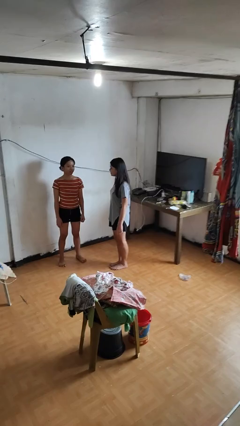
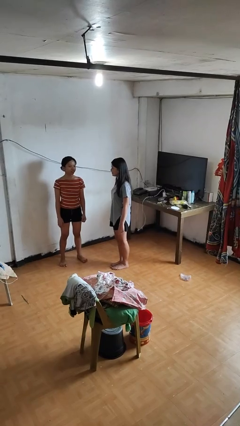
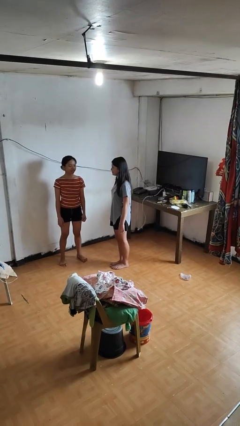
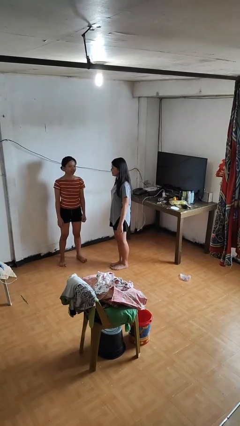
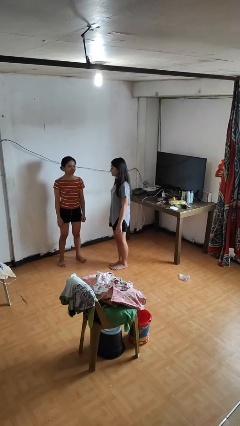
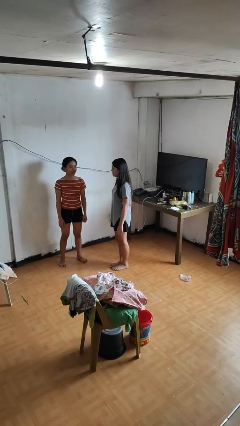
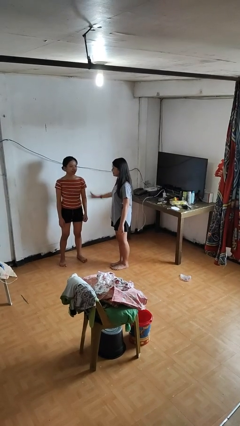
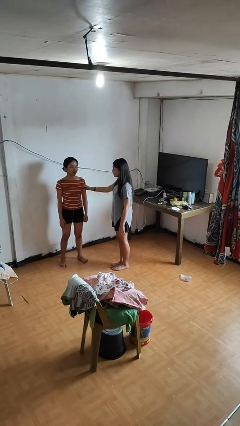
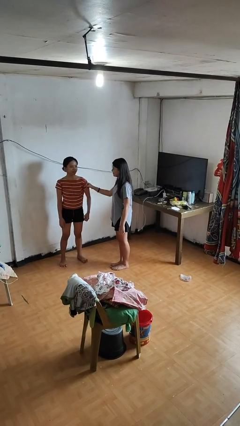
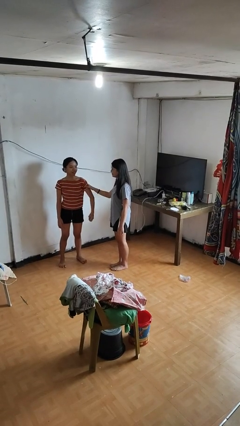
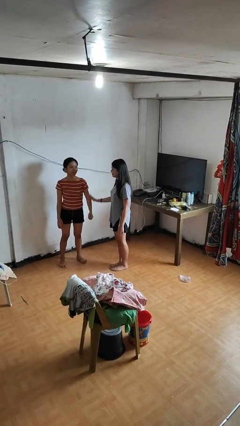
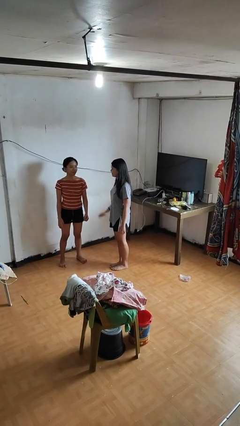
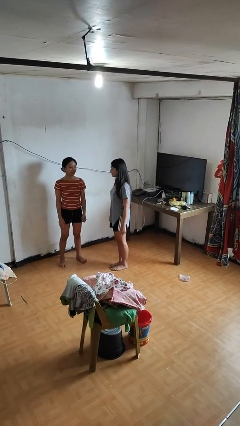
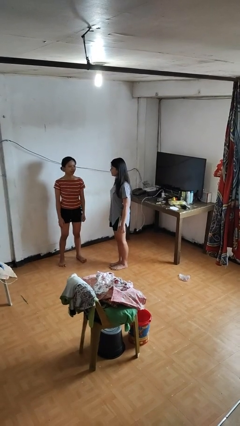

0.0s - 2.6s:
person grabs person by bicep

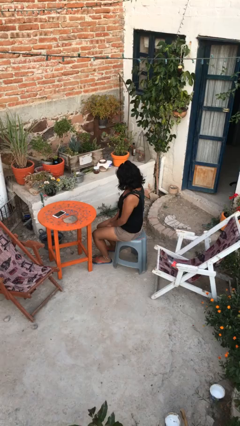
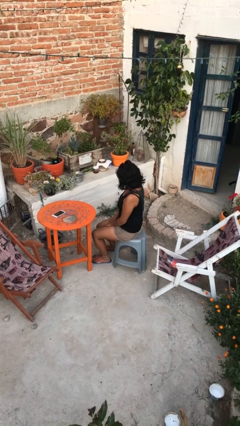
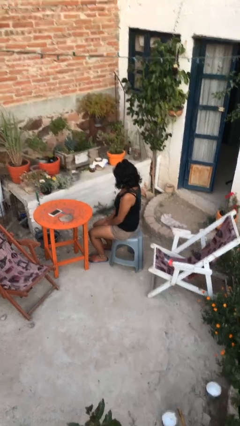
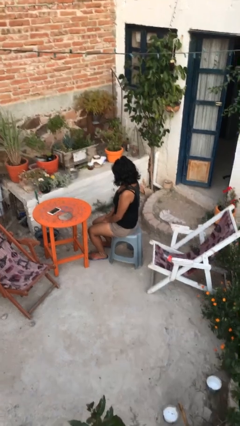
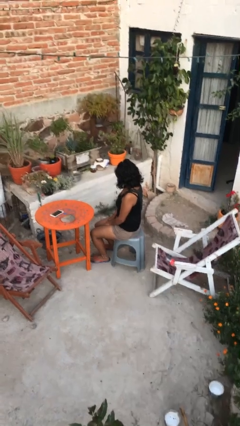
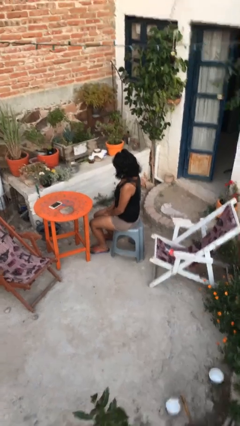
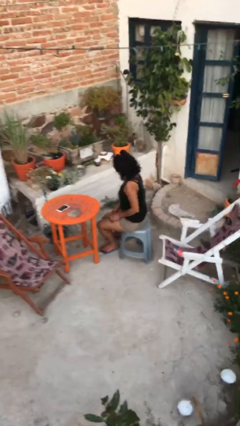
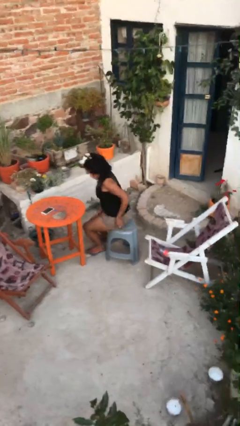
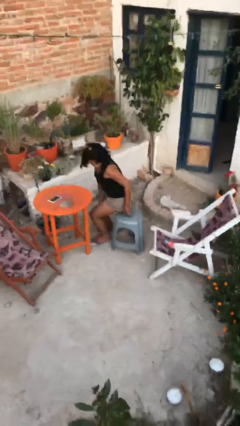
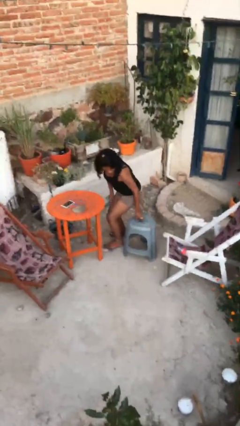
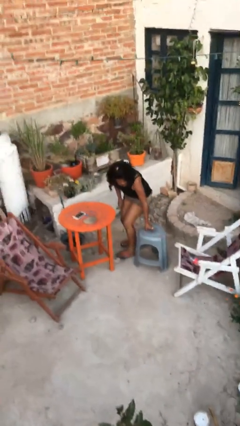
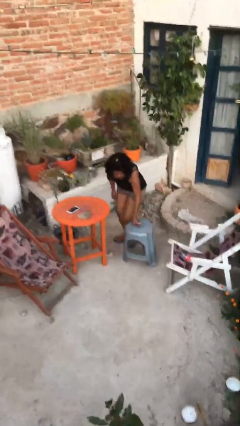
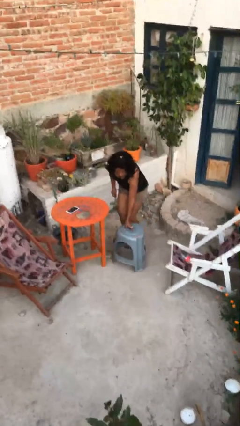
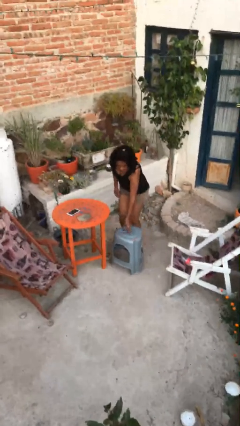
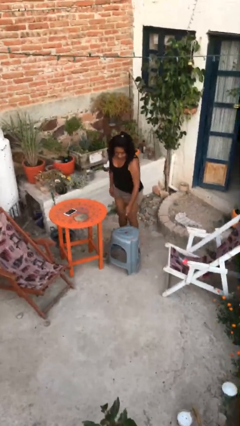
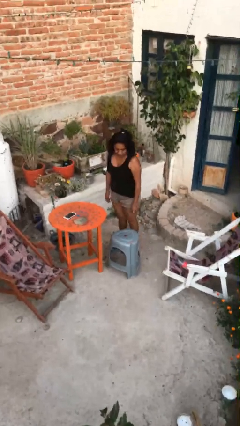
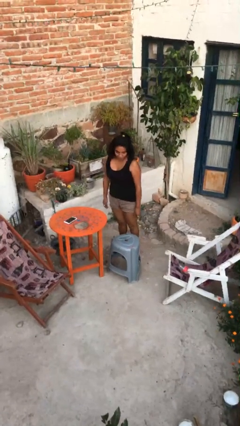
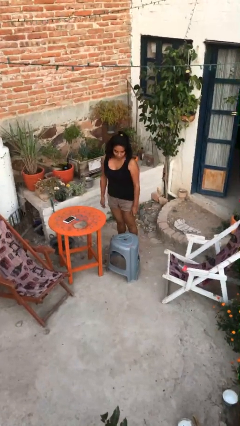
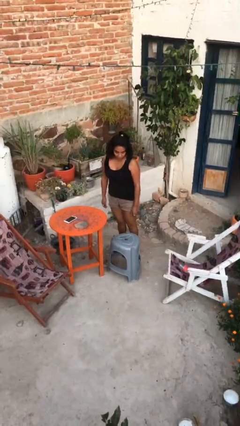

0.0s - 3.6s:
person stands up

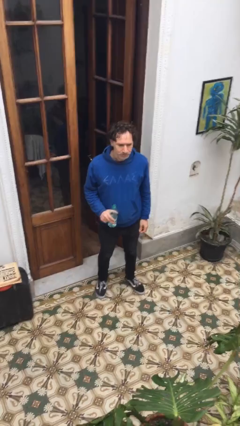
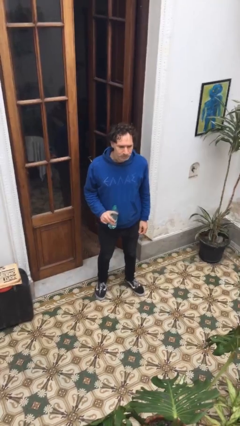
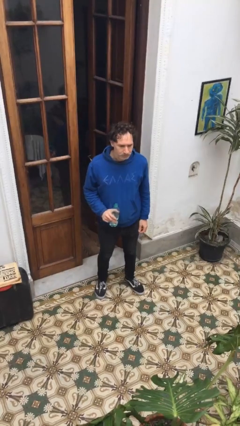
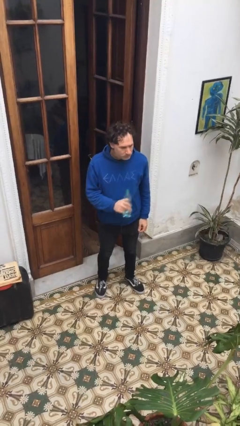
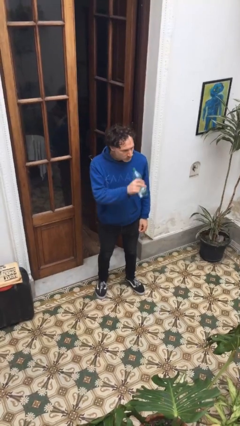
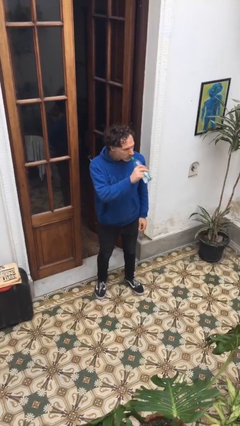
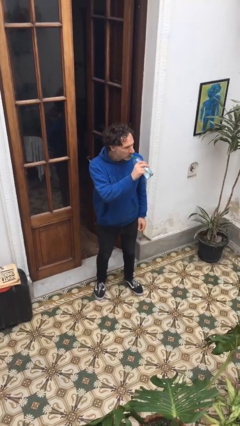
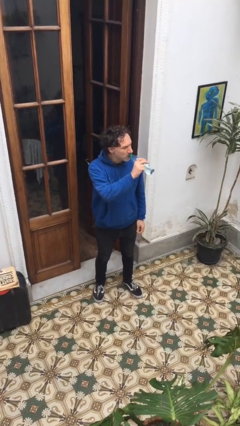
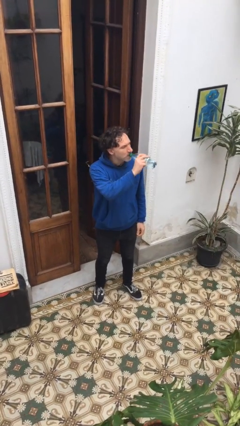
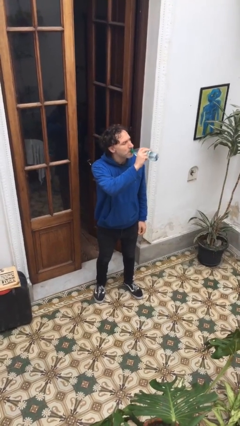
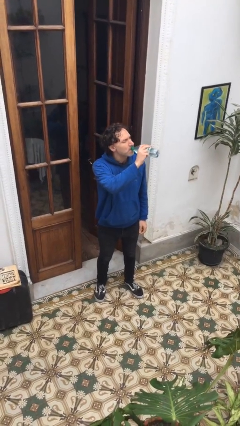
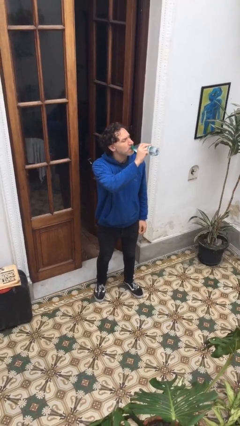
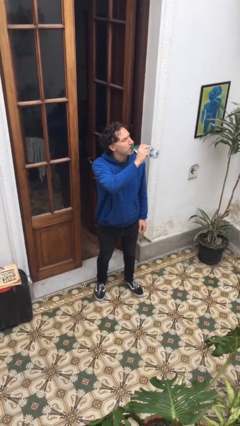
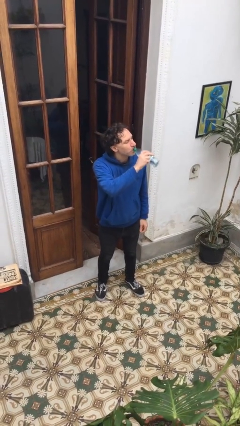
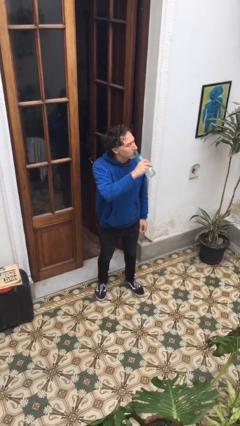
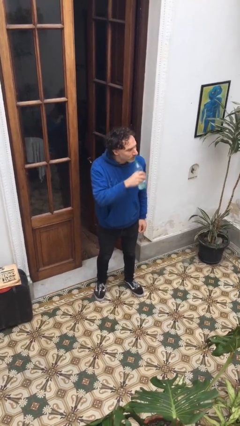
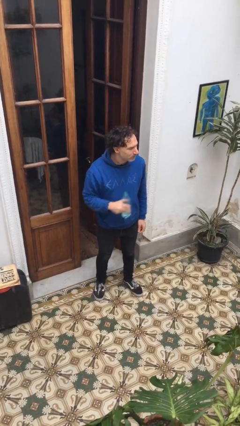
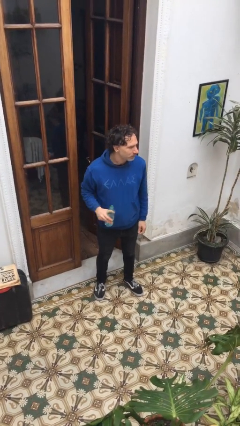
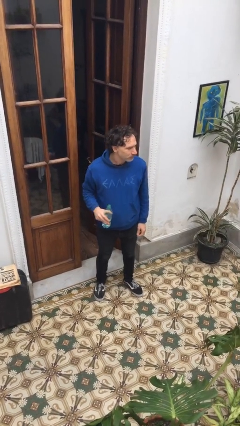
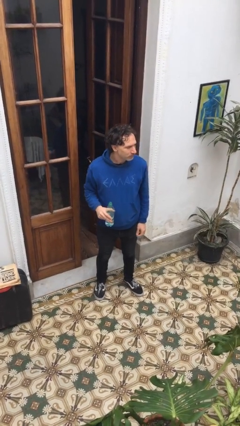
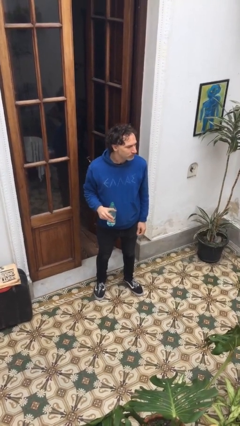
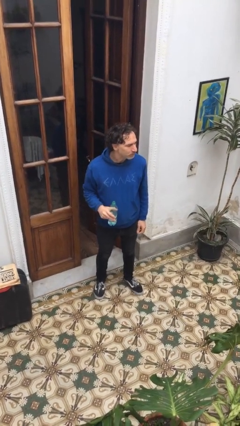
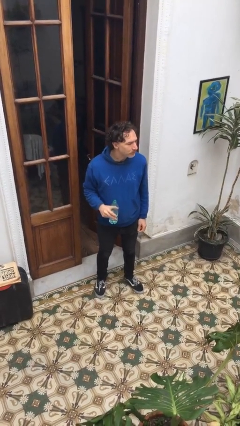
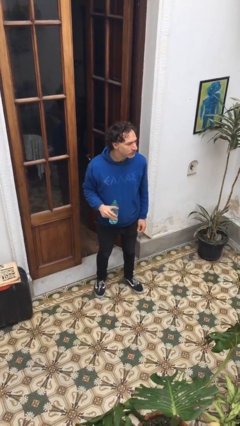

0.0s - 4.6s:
person drinks from bottle

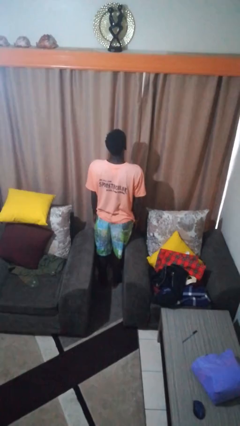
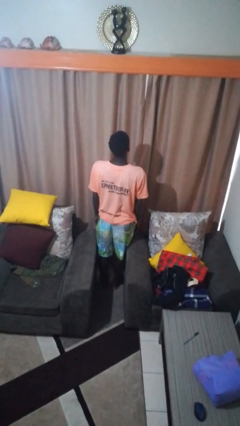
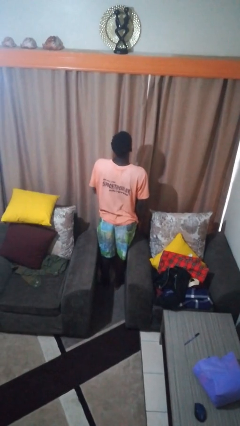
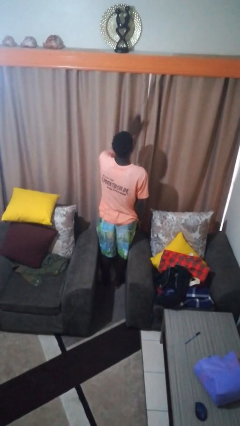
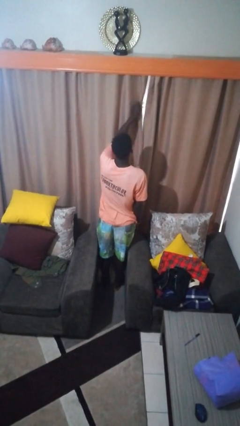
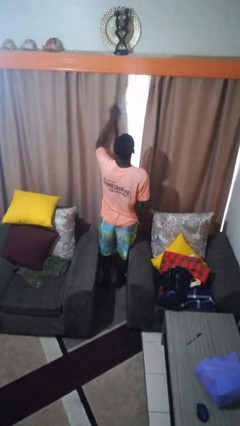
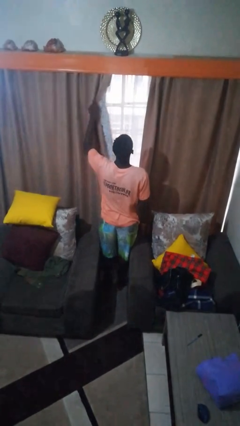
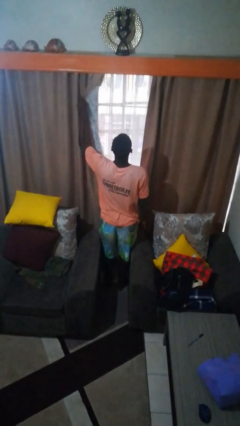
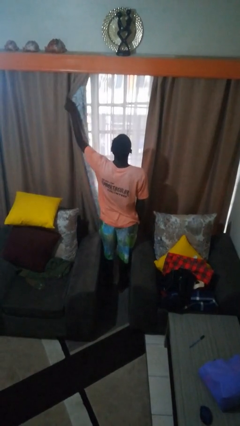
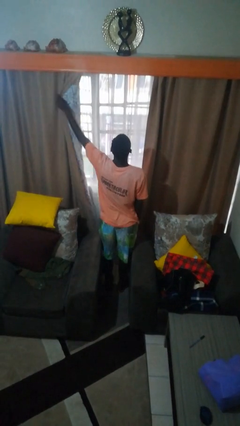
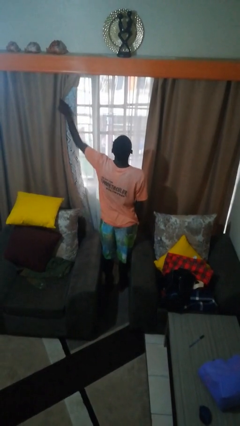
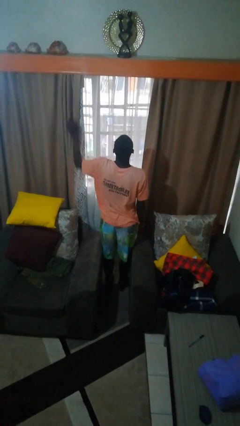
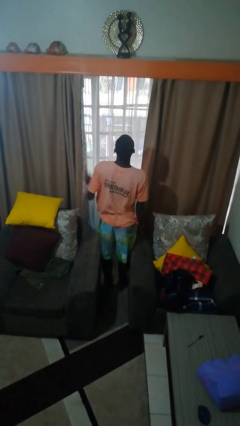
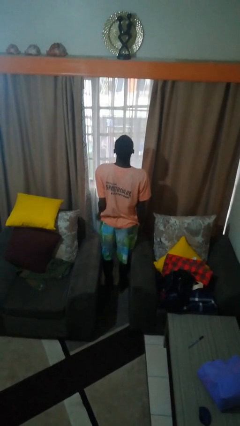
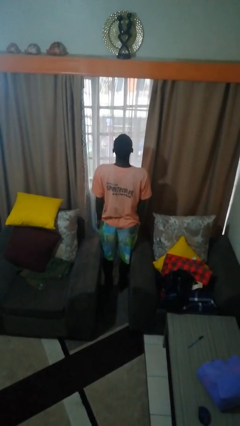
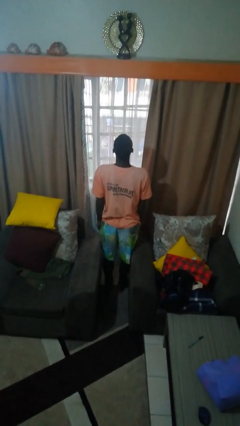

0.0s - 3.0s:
person opens curtains

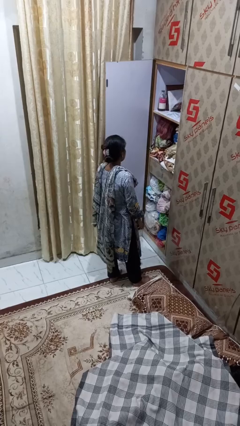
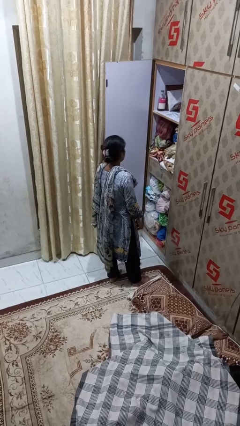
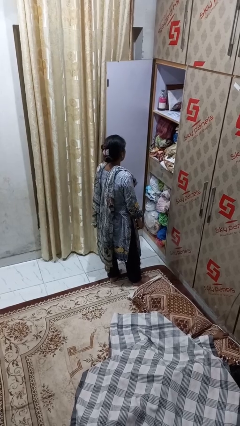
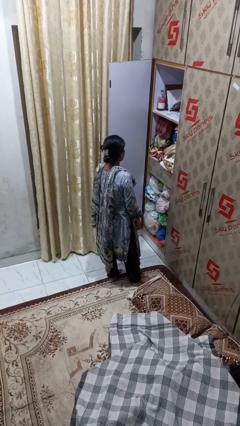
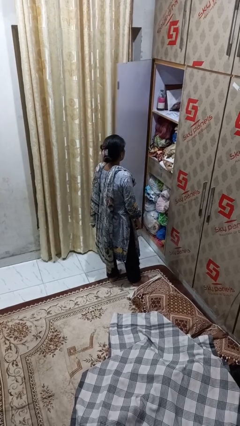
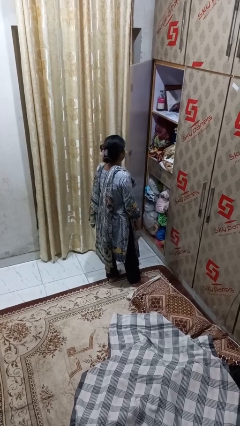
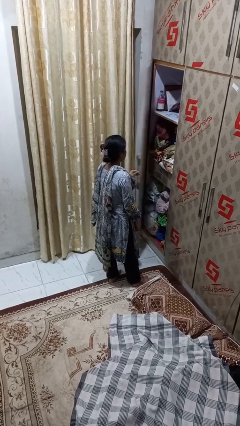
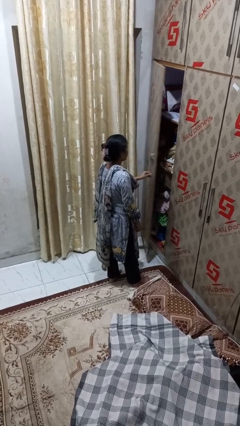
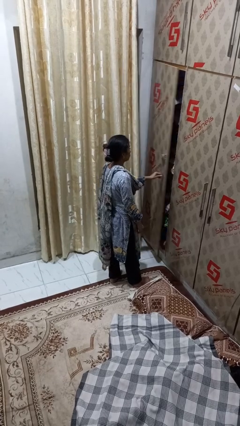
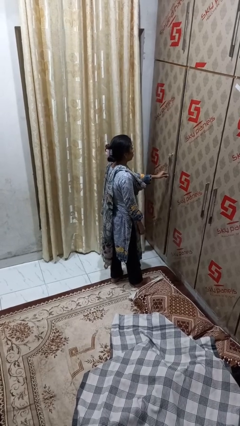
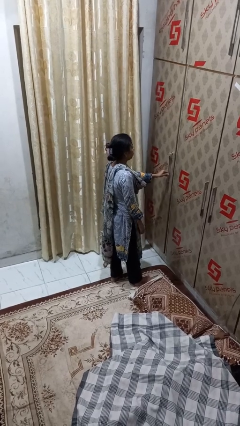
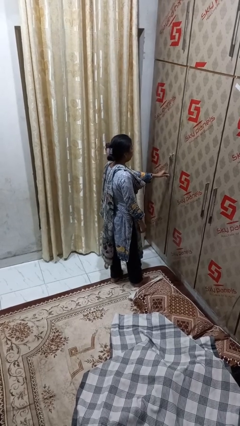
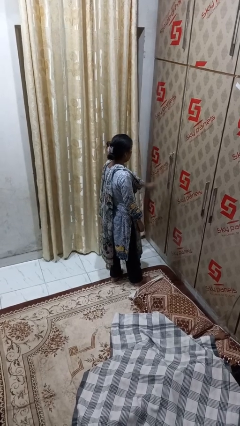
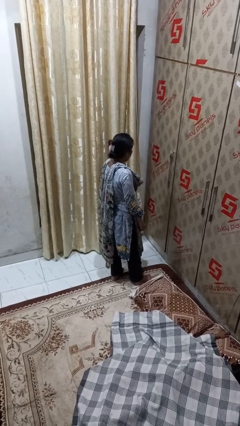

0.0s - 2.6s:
person closes closet door

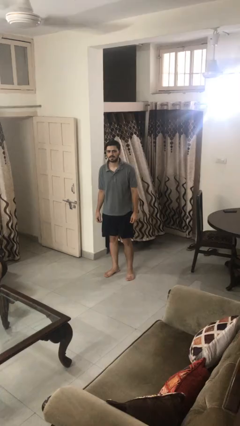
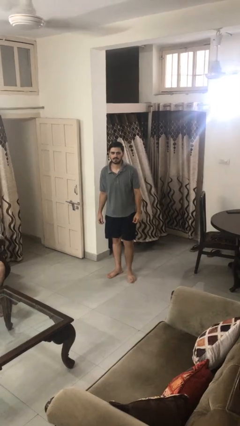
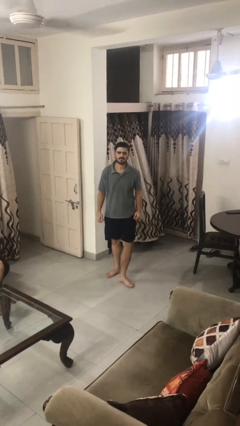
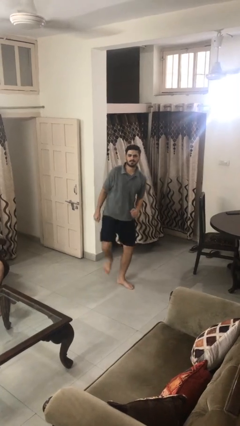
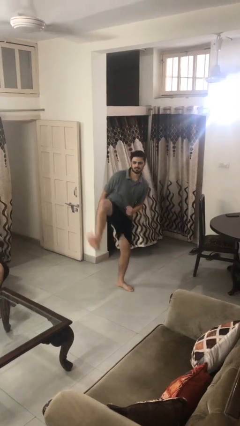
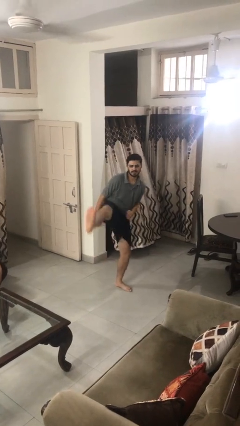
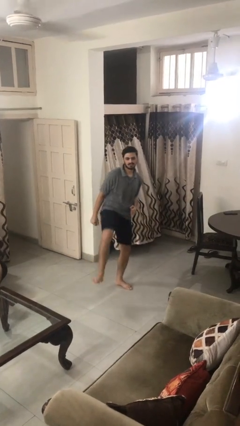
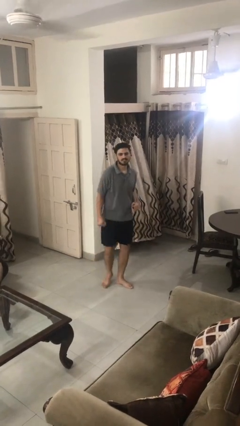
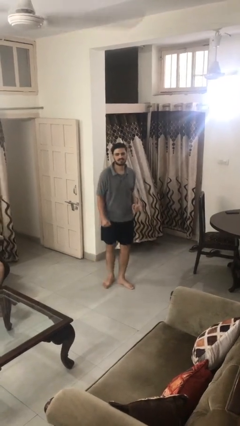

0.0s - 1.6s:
person karate kicks
